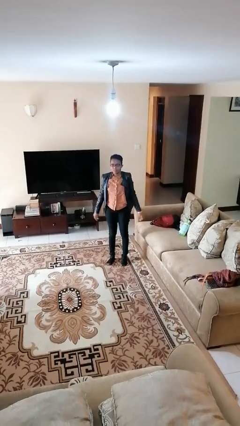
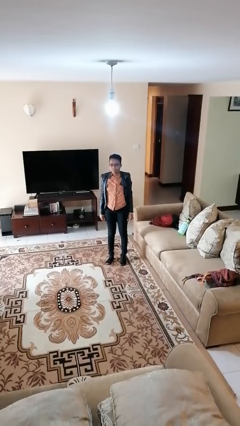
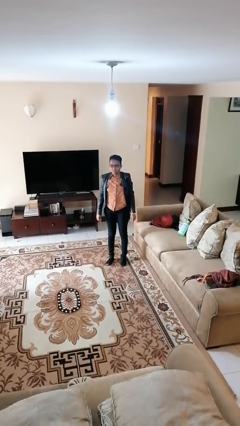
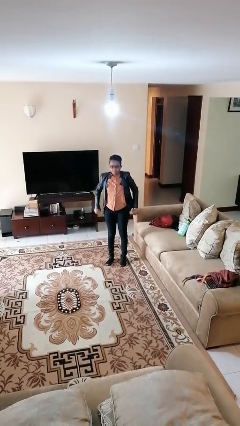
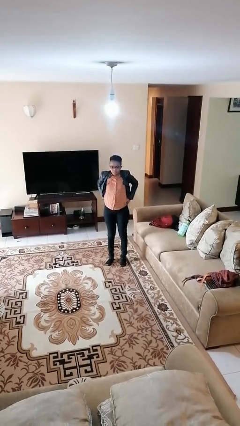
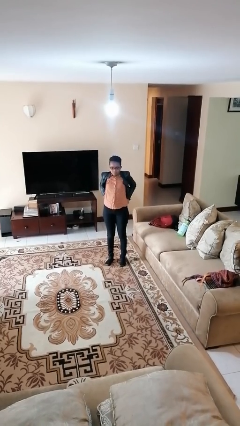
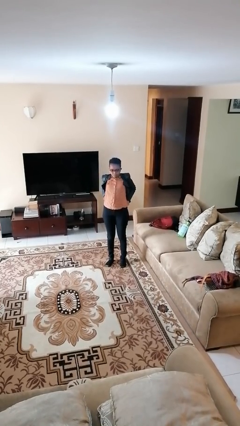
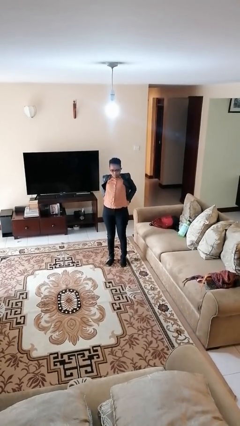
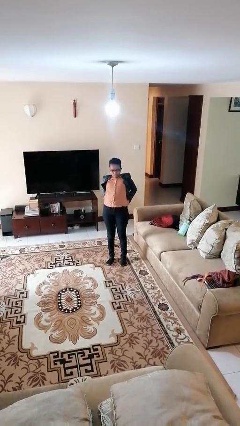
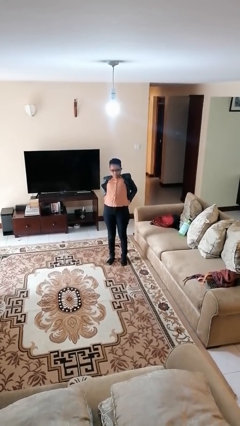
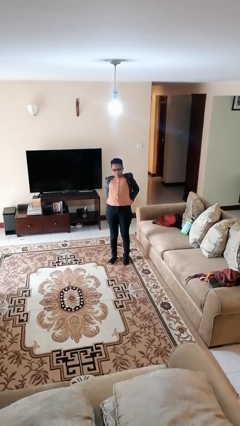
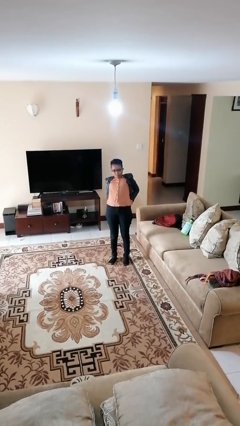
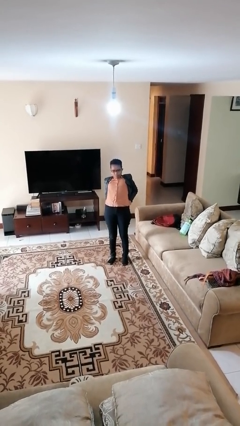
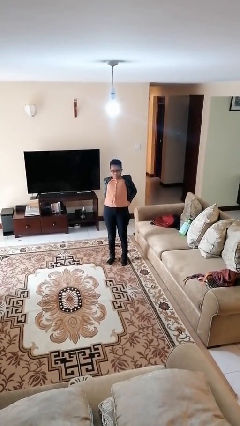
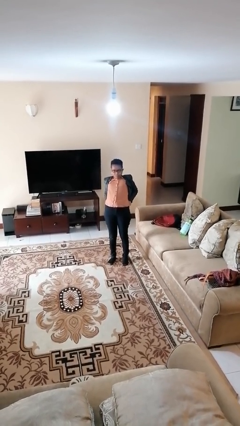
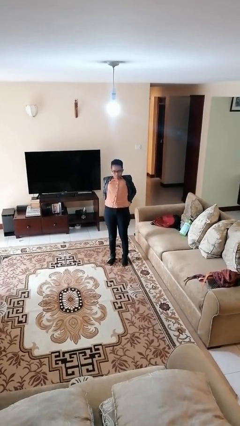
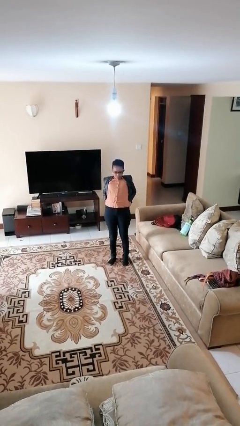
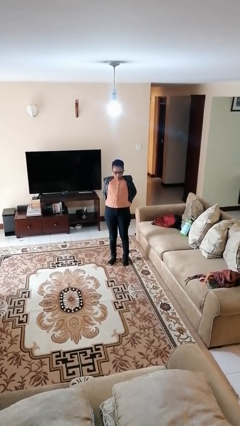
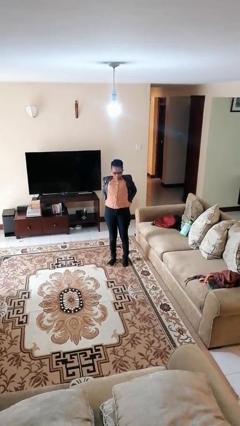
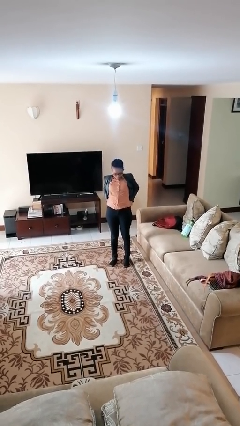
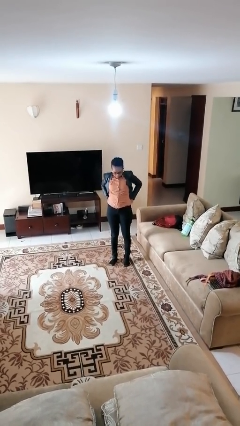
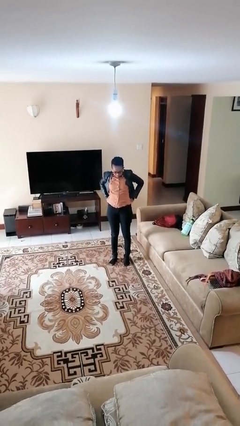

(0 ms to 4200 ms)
person stretches back

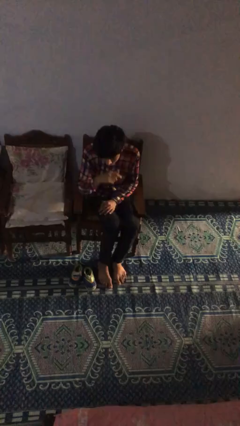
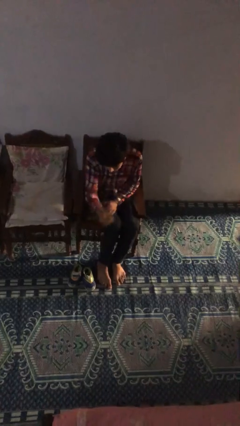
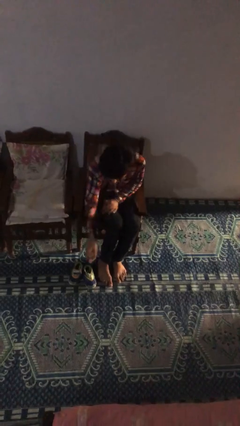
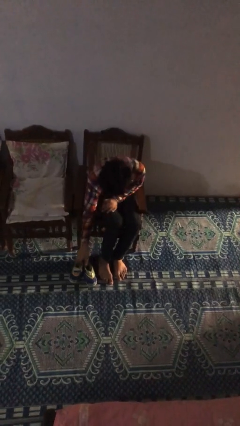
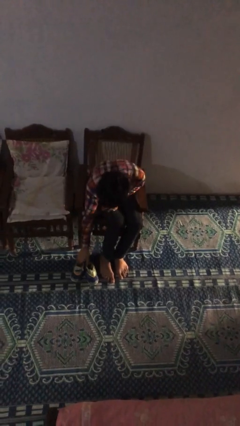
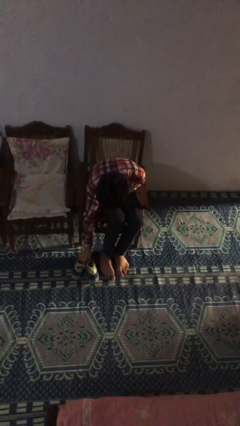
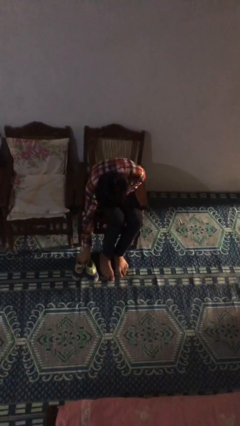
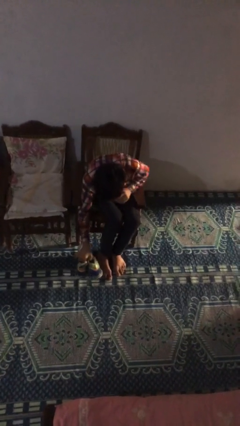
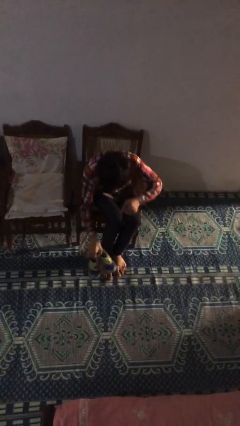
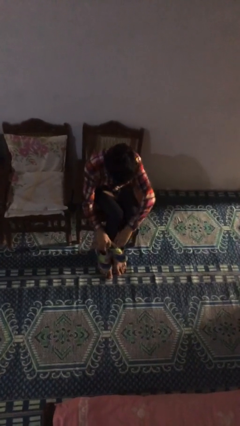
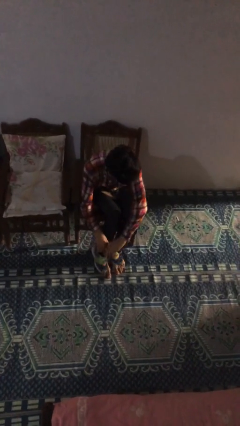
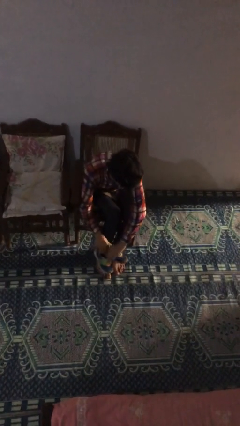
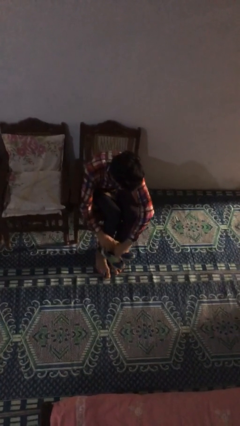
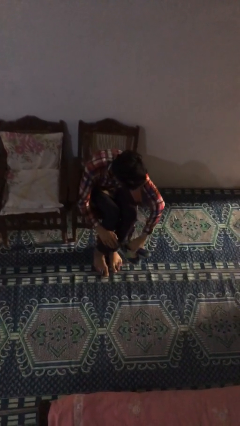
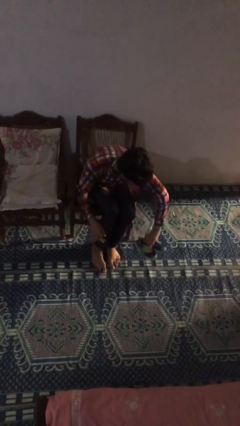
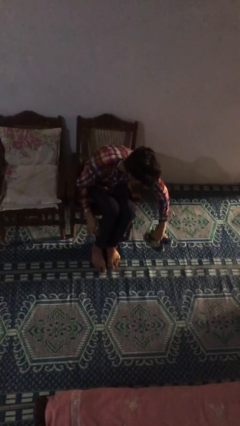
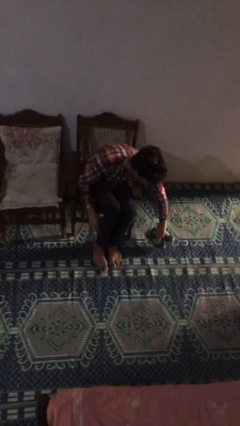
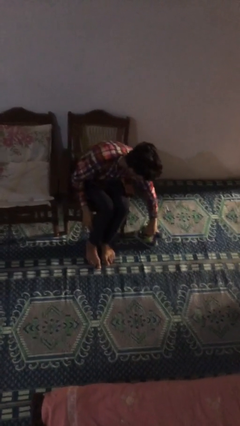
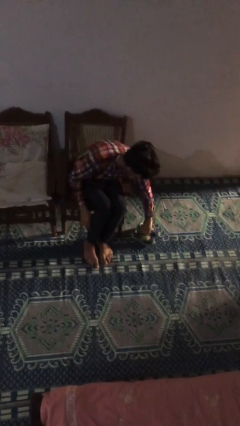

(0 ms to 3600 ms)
person picks up object from floor

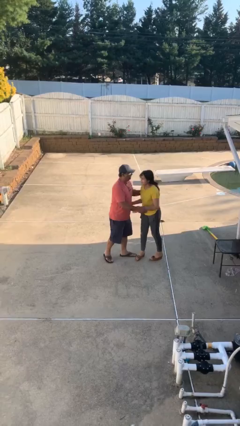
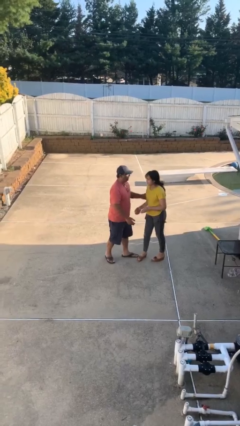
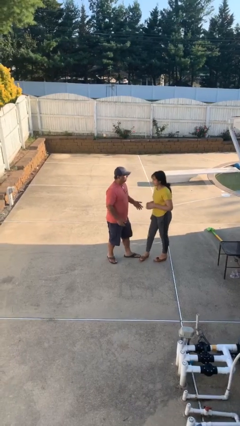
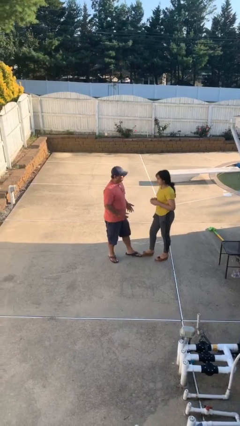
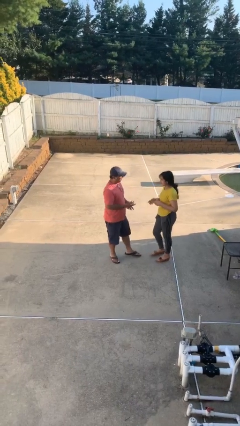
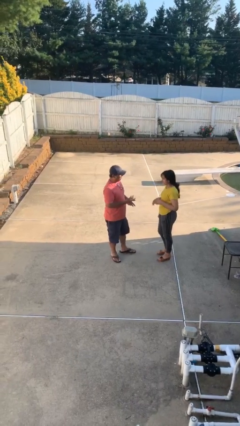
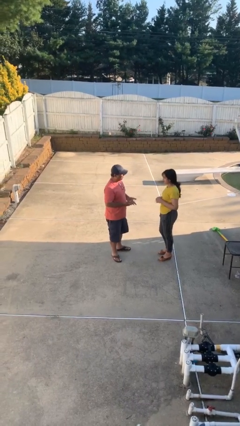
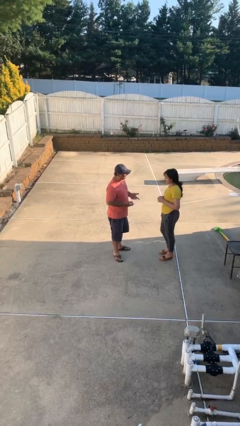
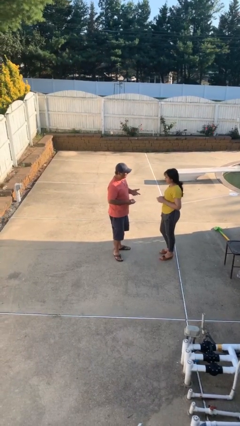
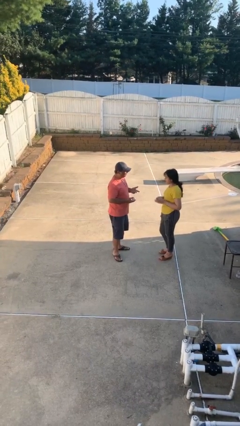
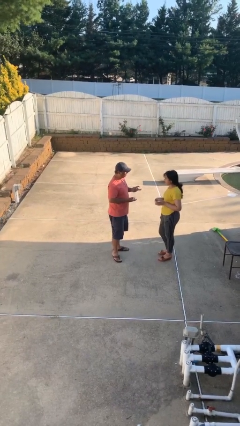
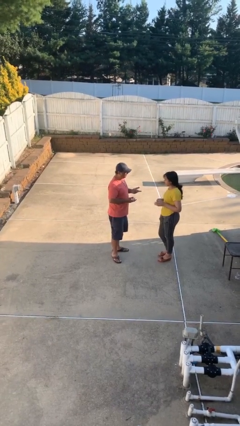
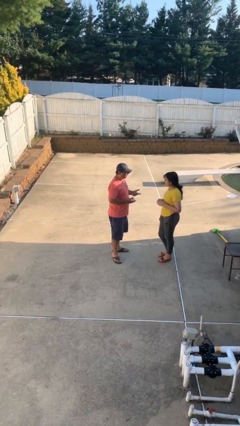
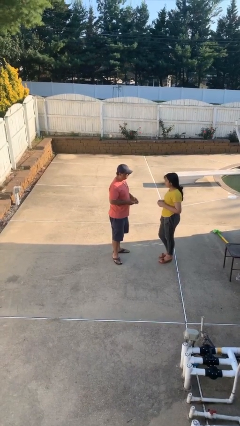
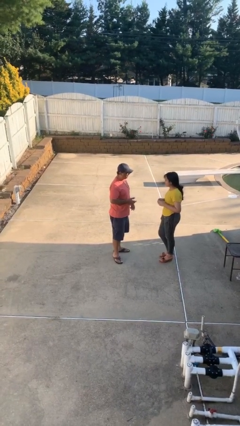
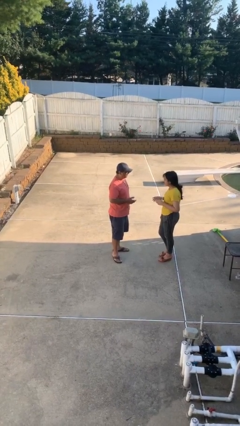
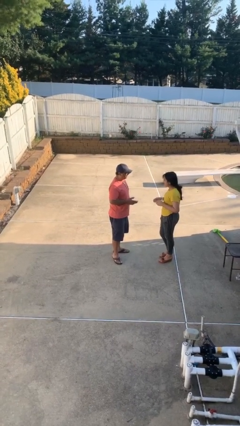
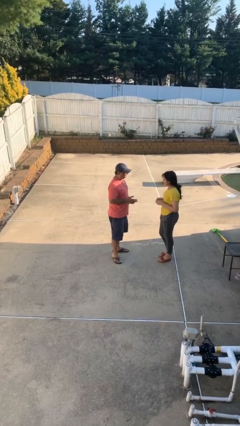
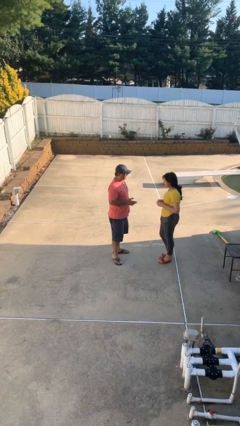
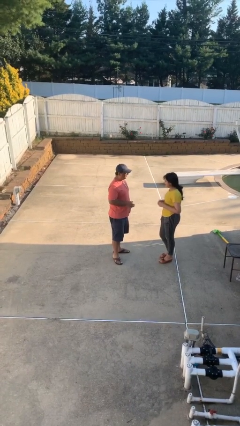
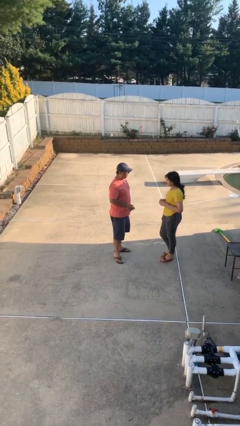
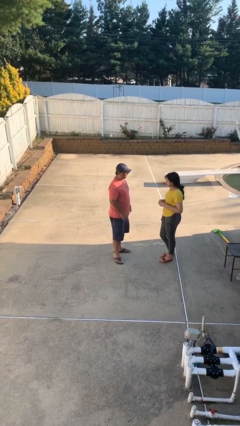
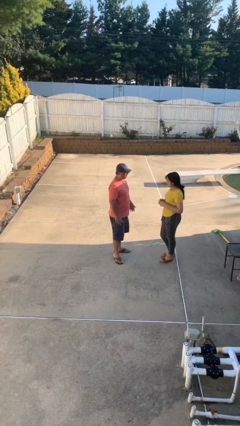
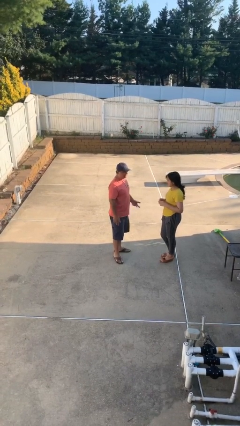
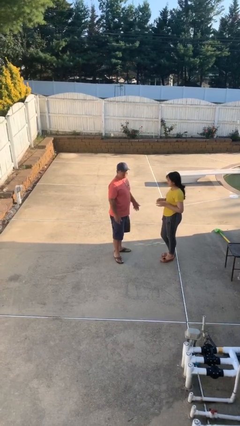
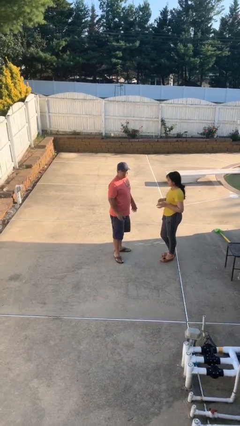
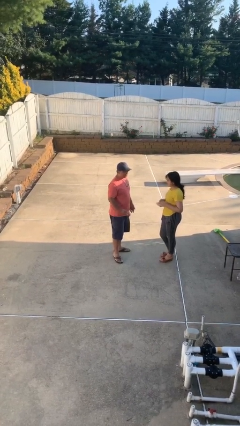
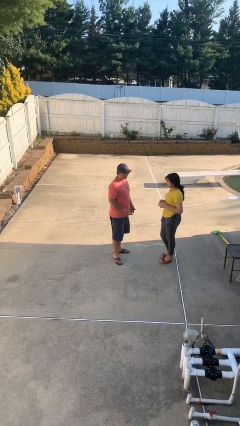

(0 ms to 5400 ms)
person talks to person

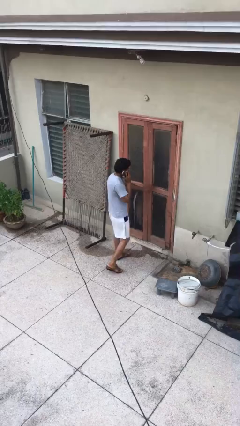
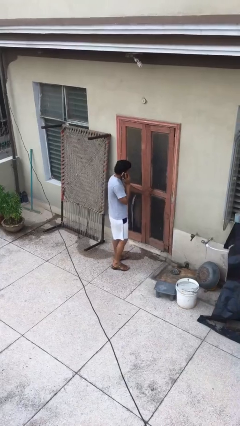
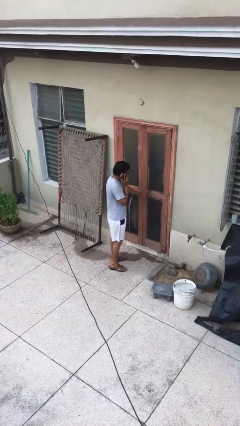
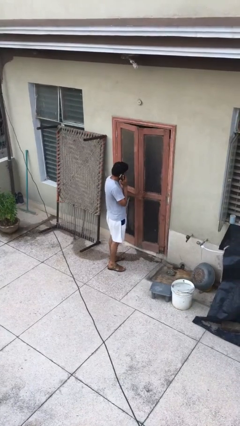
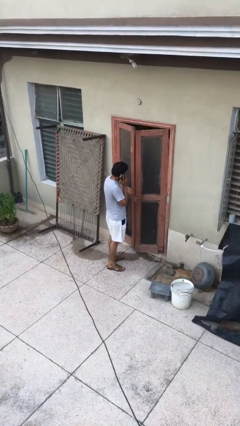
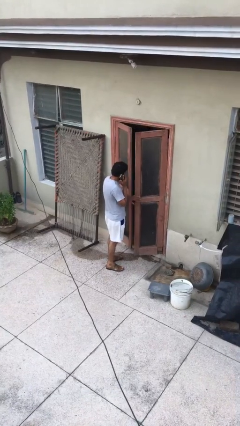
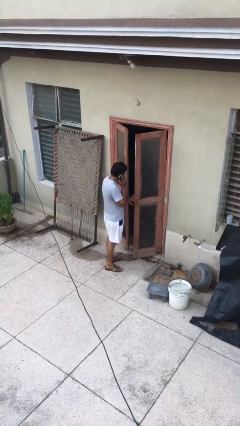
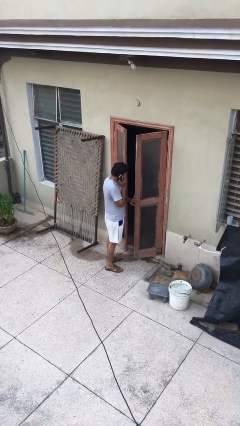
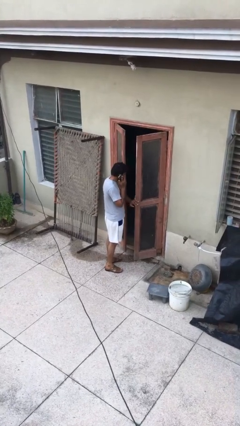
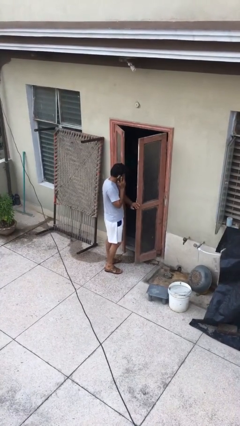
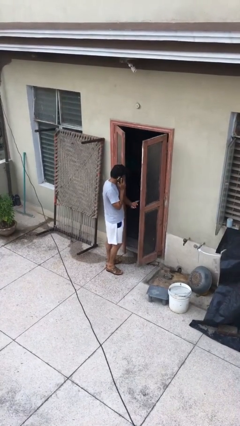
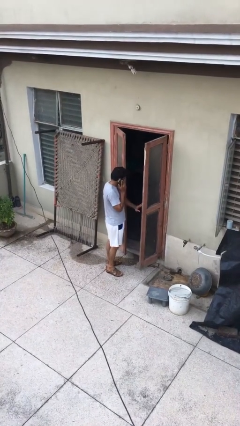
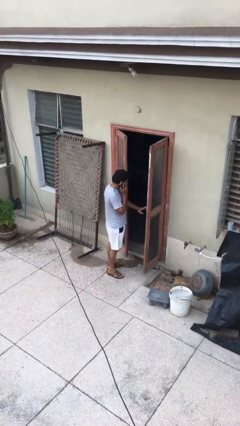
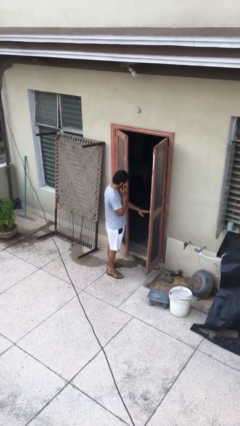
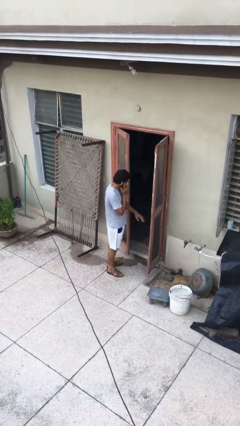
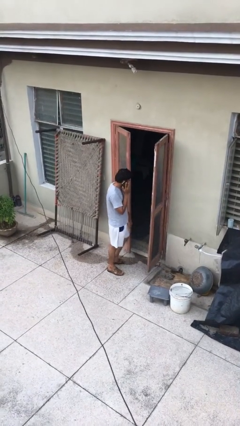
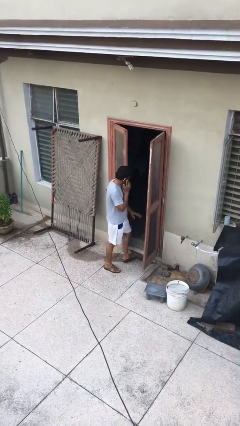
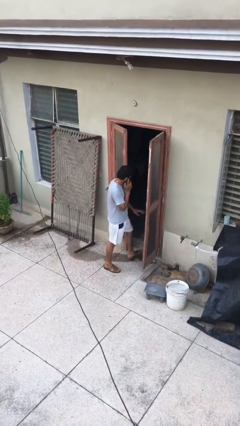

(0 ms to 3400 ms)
person opens facility door

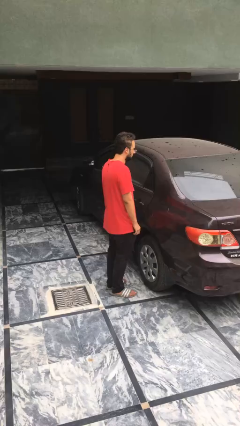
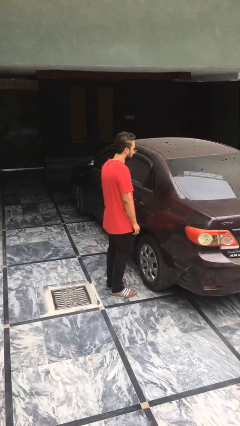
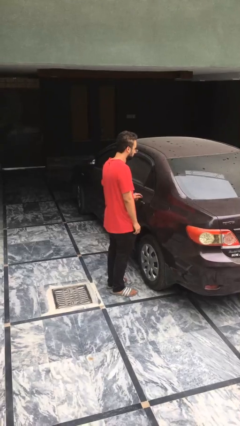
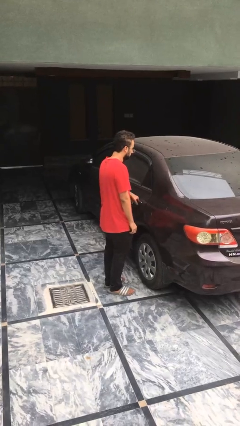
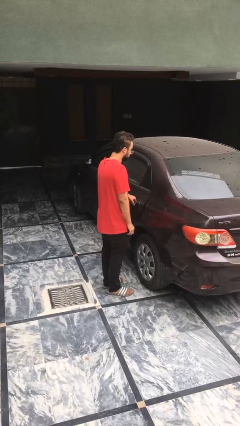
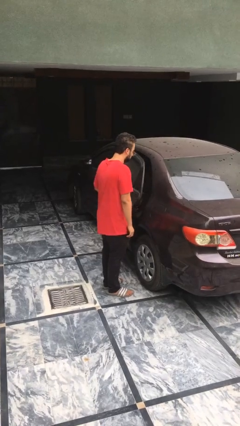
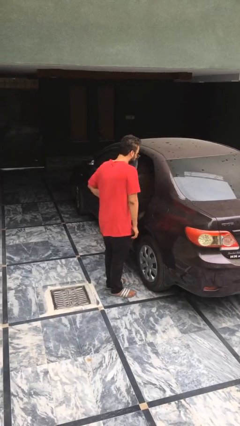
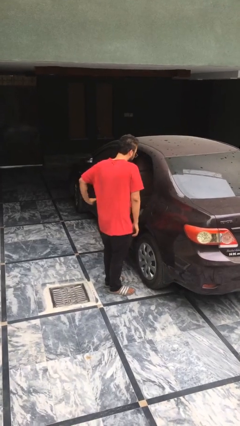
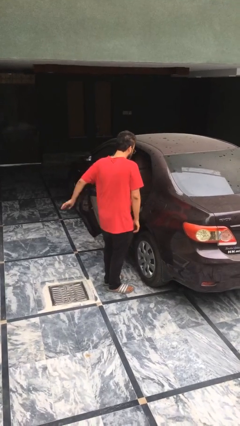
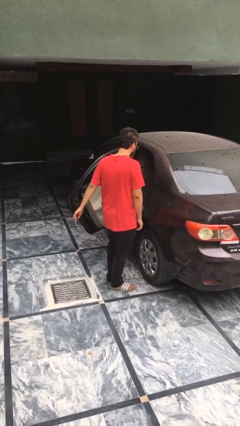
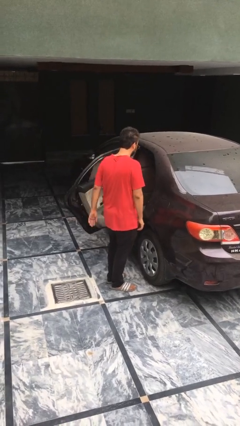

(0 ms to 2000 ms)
person opens car door
